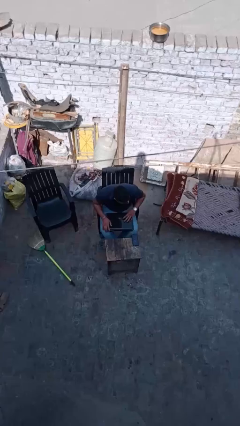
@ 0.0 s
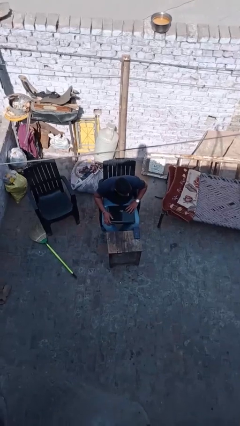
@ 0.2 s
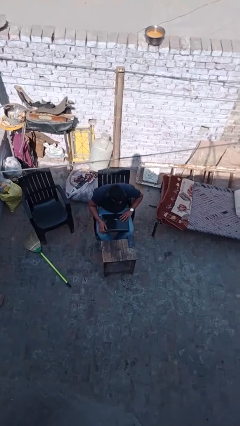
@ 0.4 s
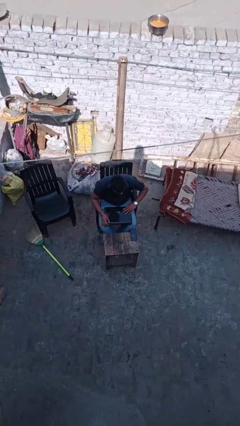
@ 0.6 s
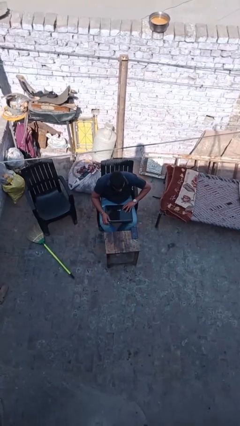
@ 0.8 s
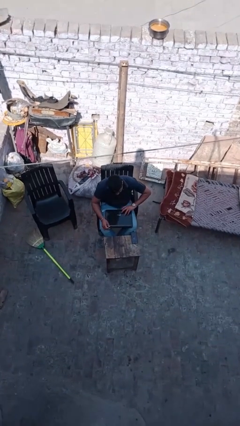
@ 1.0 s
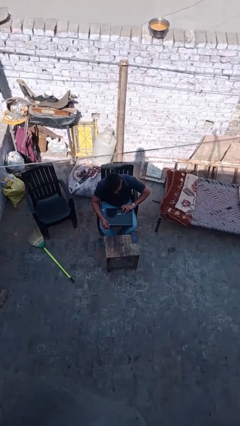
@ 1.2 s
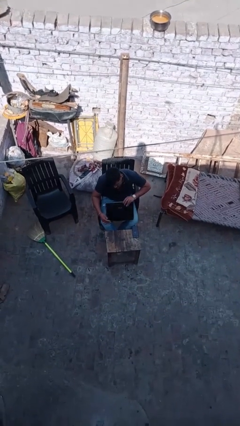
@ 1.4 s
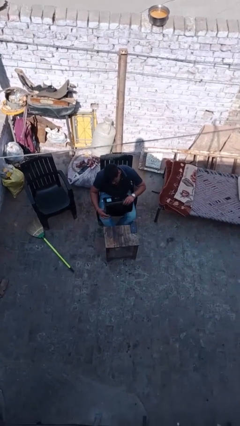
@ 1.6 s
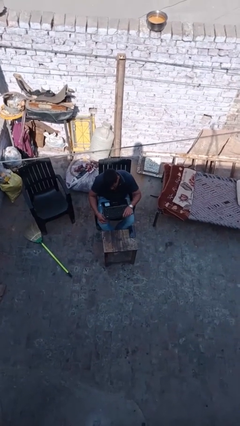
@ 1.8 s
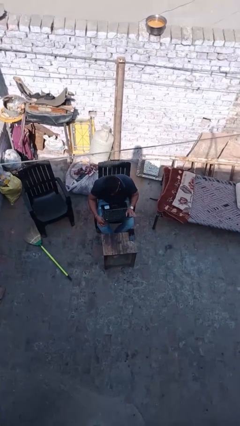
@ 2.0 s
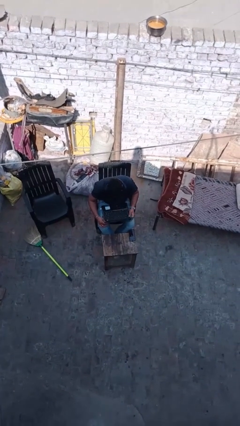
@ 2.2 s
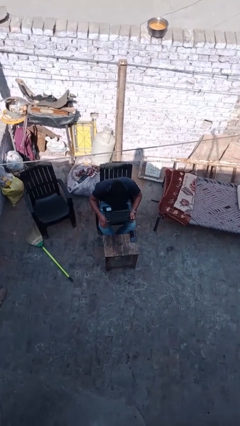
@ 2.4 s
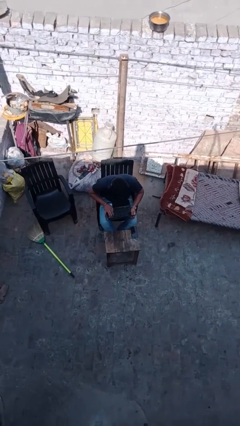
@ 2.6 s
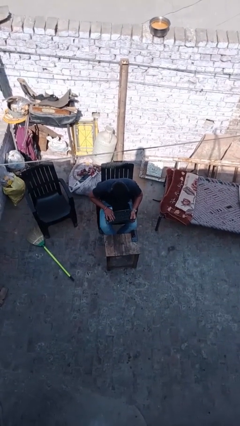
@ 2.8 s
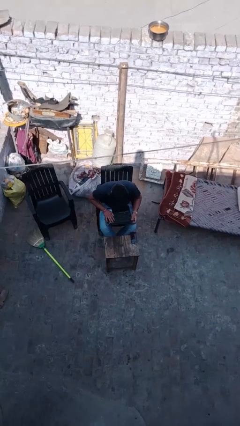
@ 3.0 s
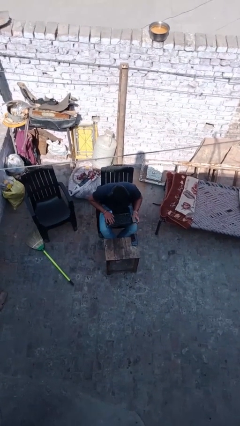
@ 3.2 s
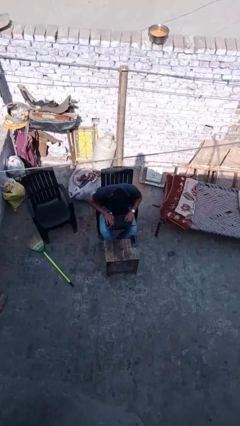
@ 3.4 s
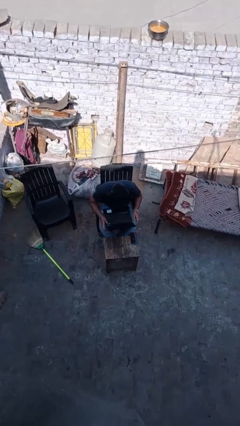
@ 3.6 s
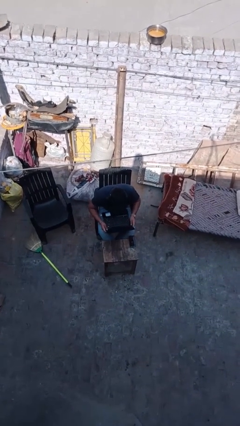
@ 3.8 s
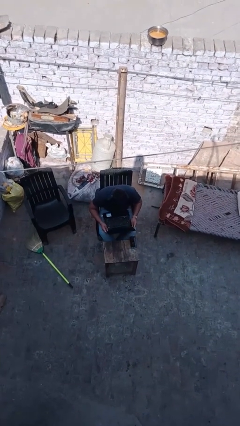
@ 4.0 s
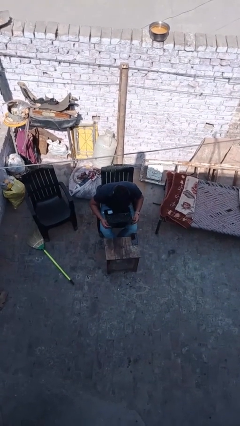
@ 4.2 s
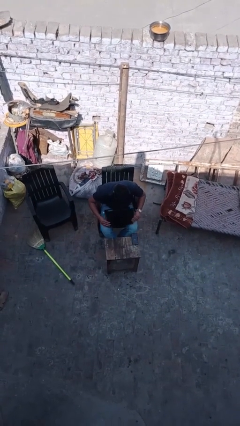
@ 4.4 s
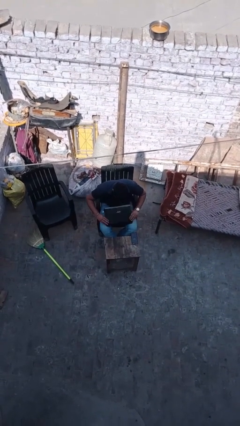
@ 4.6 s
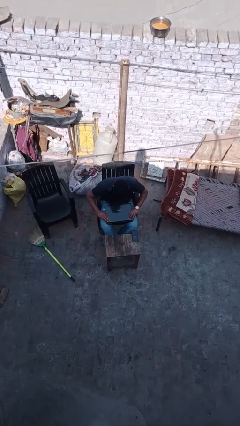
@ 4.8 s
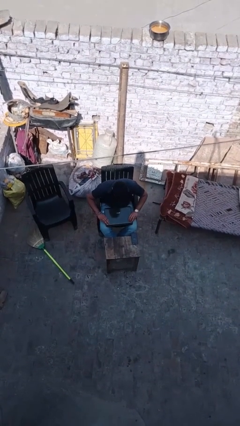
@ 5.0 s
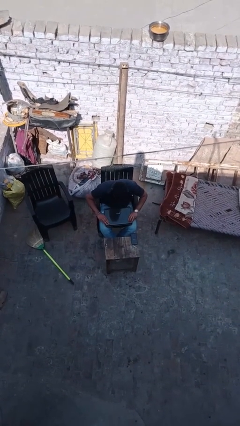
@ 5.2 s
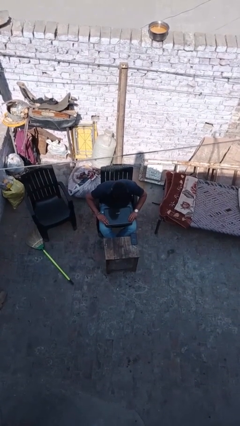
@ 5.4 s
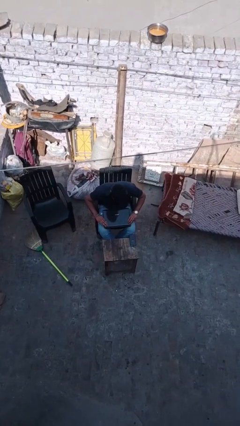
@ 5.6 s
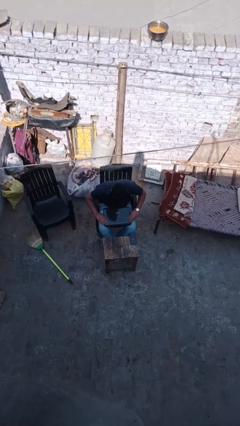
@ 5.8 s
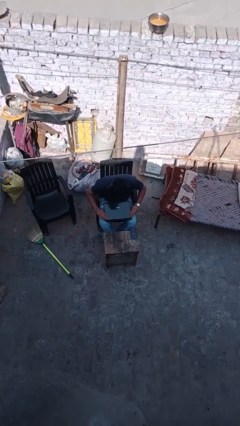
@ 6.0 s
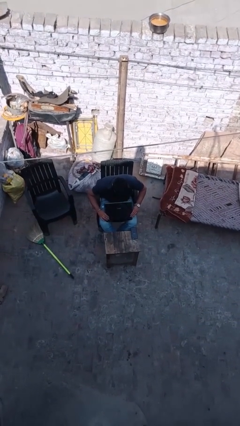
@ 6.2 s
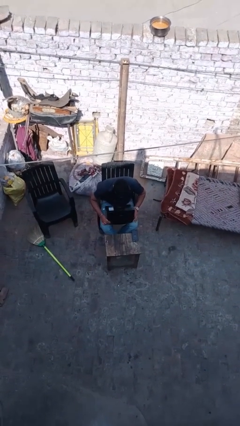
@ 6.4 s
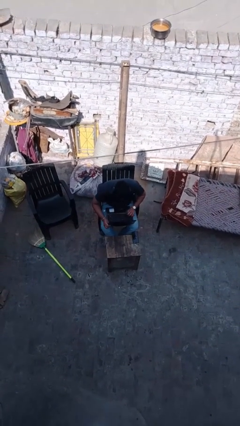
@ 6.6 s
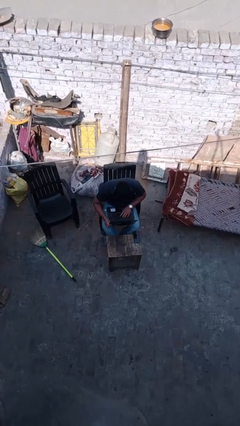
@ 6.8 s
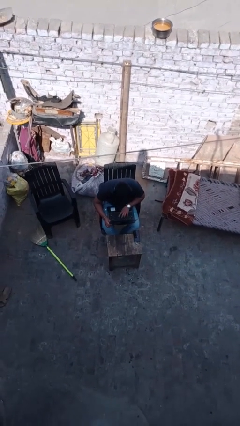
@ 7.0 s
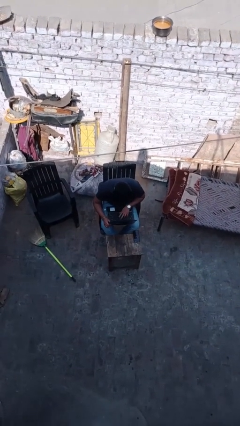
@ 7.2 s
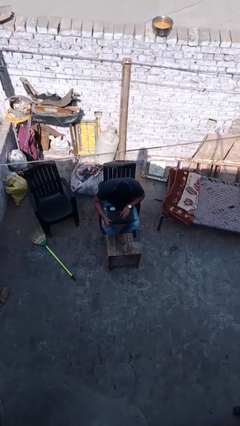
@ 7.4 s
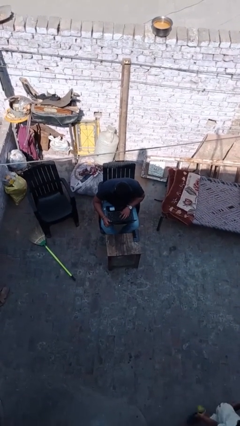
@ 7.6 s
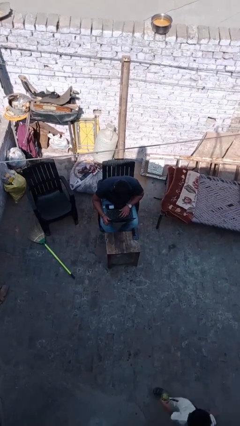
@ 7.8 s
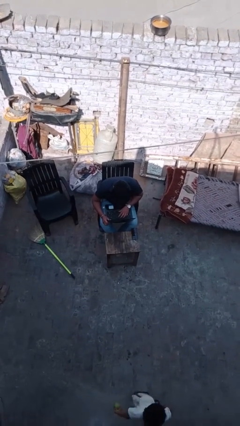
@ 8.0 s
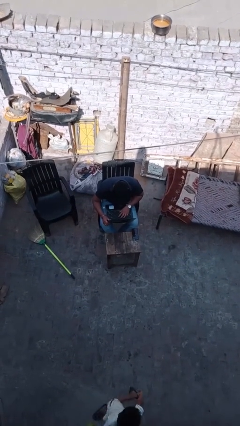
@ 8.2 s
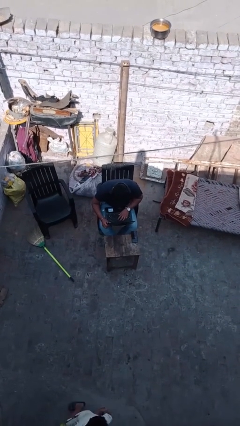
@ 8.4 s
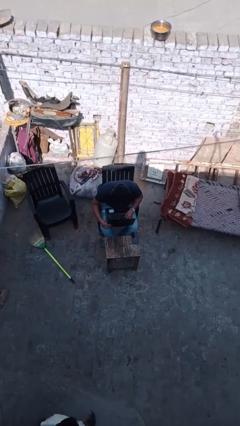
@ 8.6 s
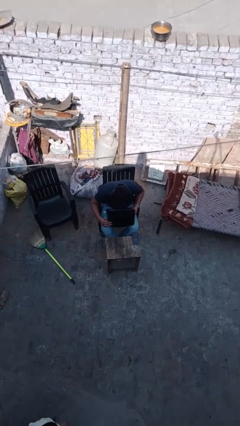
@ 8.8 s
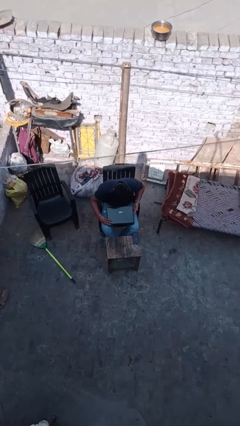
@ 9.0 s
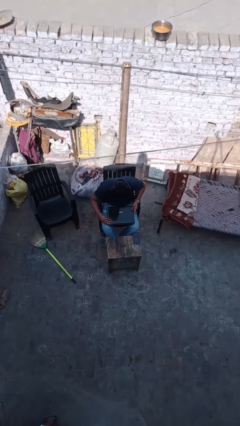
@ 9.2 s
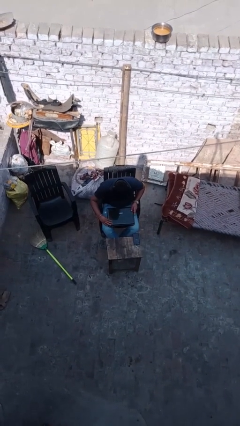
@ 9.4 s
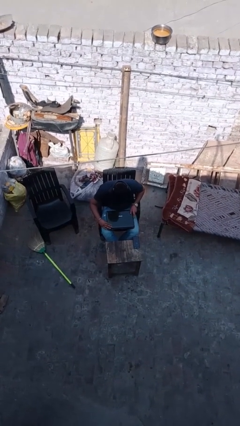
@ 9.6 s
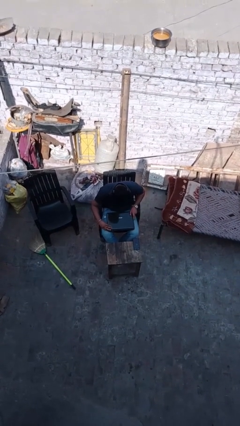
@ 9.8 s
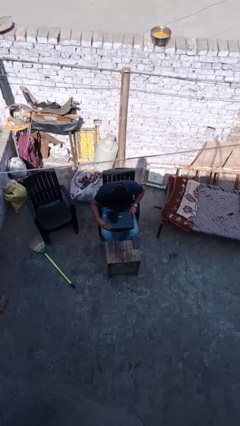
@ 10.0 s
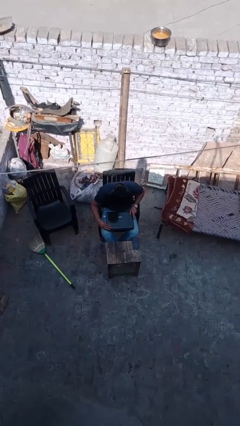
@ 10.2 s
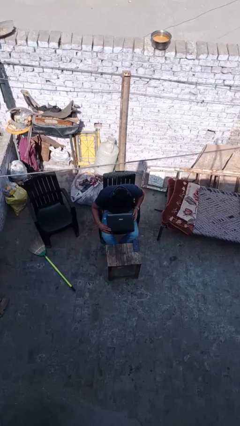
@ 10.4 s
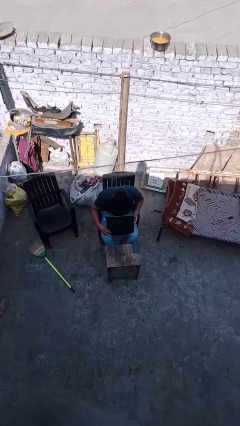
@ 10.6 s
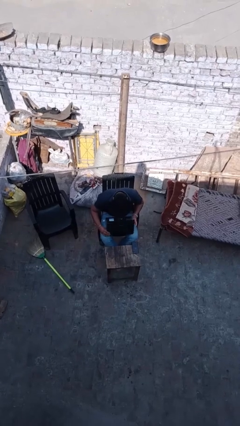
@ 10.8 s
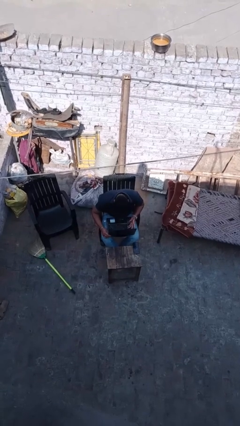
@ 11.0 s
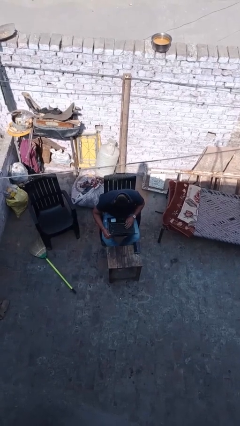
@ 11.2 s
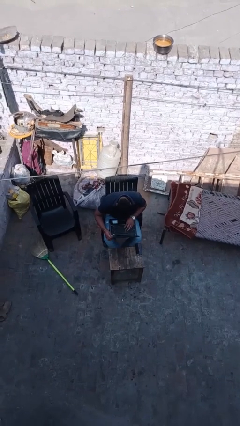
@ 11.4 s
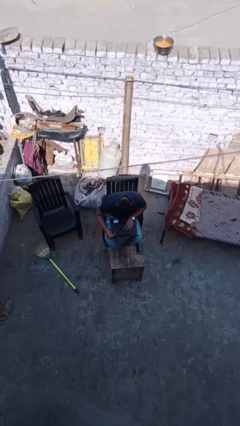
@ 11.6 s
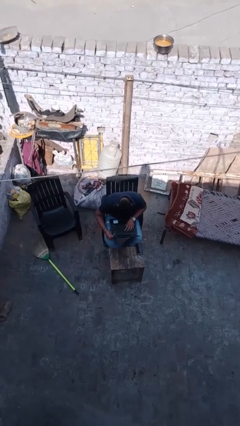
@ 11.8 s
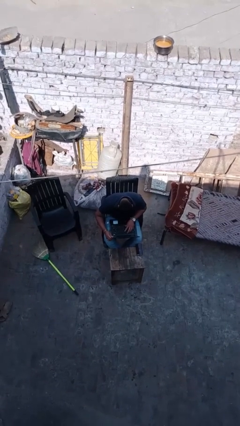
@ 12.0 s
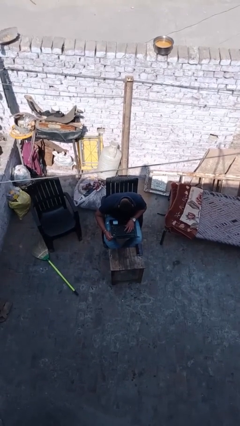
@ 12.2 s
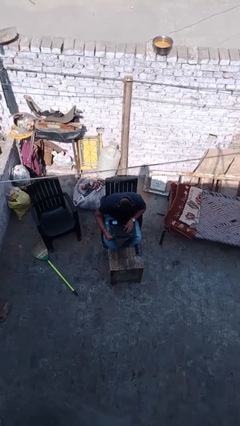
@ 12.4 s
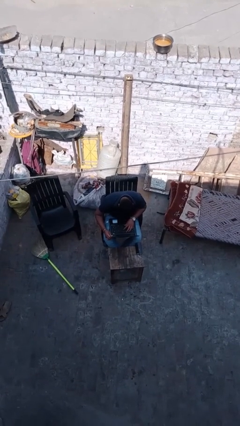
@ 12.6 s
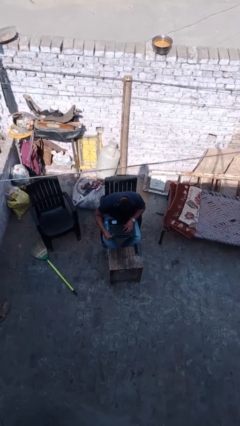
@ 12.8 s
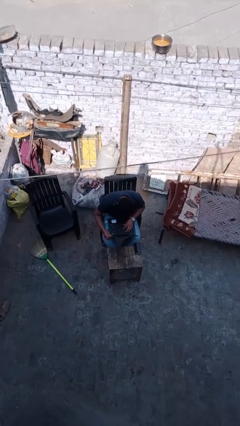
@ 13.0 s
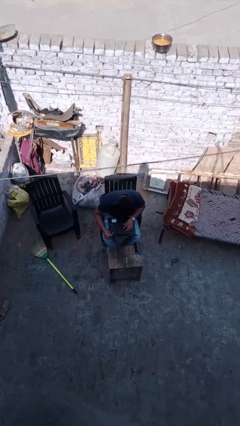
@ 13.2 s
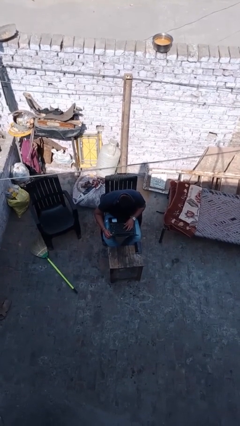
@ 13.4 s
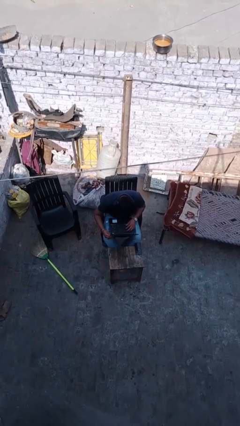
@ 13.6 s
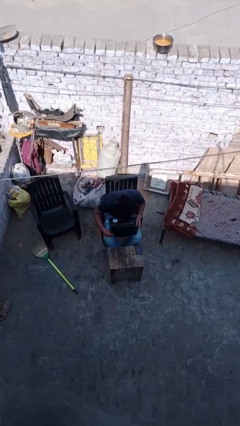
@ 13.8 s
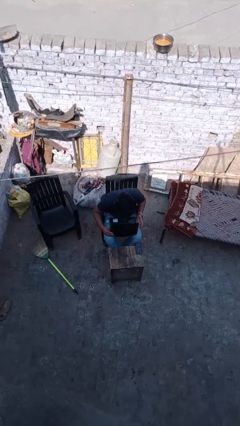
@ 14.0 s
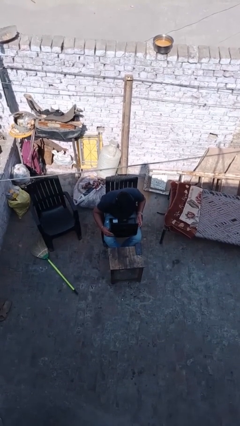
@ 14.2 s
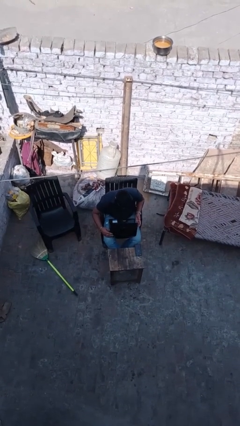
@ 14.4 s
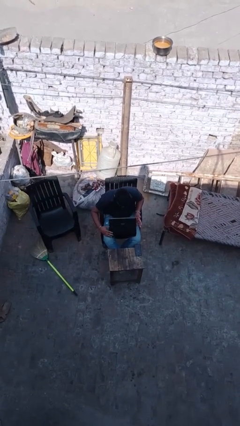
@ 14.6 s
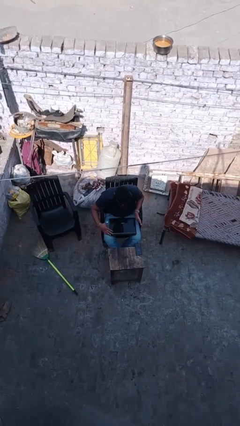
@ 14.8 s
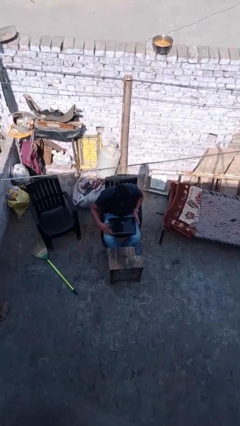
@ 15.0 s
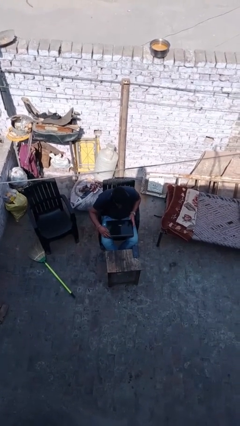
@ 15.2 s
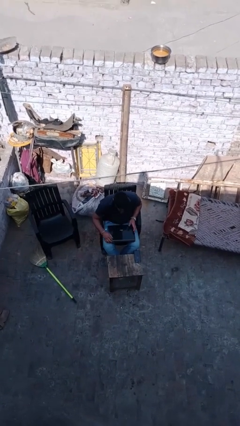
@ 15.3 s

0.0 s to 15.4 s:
person interacts with laptop

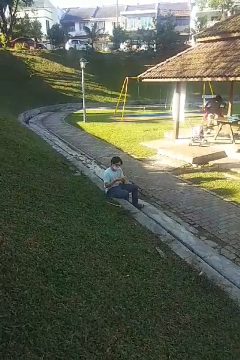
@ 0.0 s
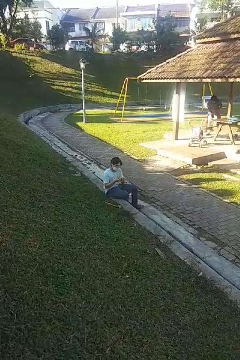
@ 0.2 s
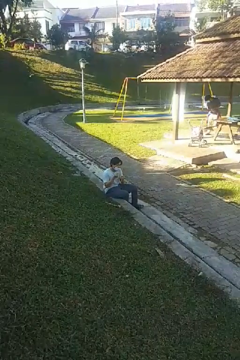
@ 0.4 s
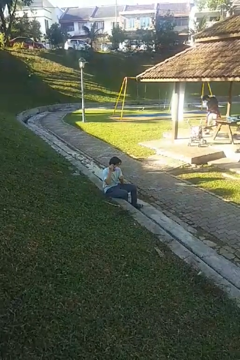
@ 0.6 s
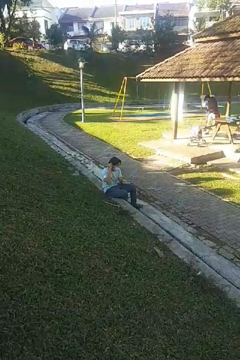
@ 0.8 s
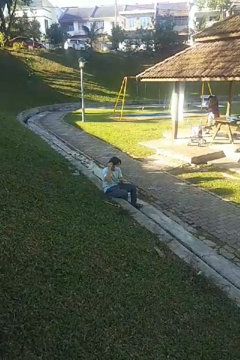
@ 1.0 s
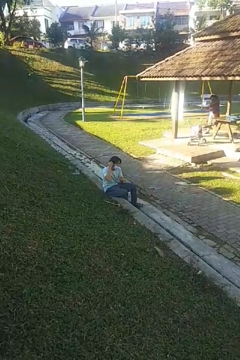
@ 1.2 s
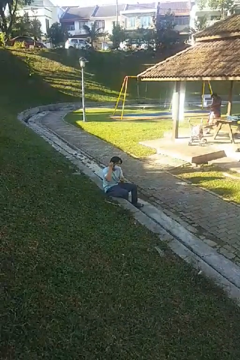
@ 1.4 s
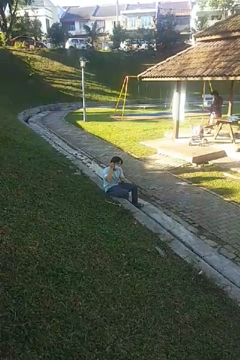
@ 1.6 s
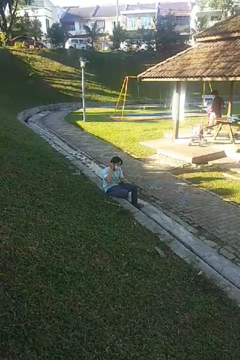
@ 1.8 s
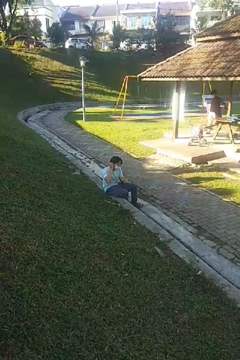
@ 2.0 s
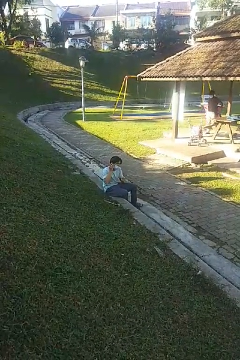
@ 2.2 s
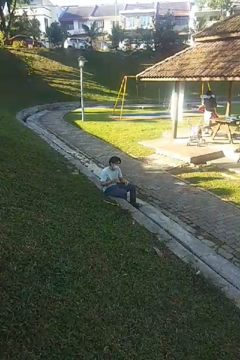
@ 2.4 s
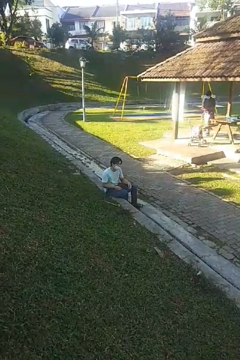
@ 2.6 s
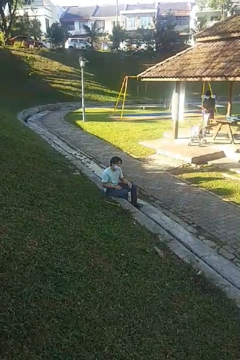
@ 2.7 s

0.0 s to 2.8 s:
person puts on earrings
